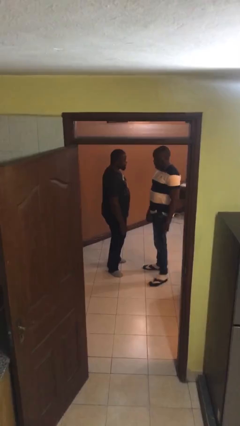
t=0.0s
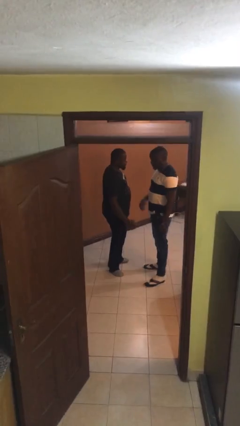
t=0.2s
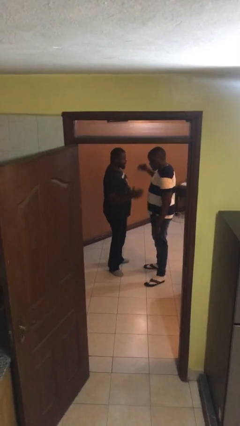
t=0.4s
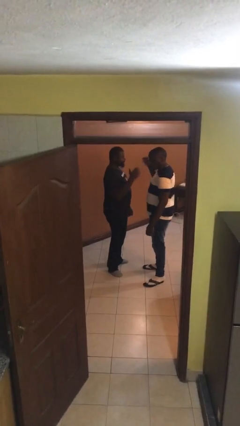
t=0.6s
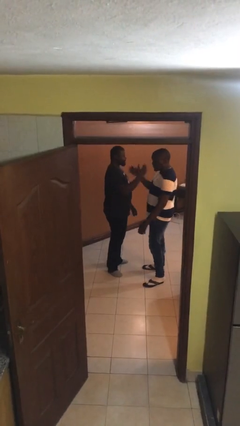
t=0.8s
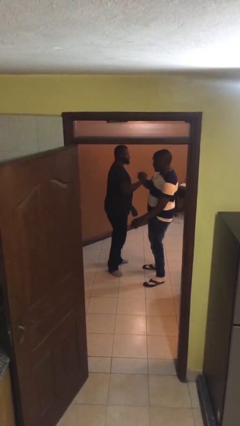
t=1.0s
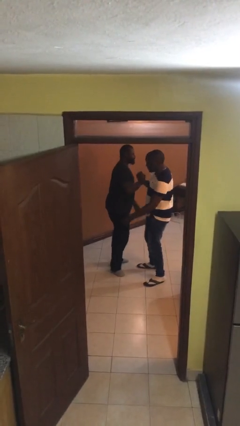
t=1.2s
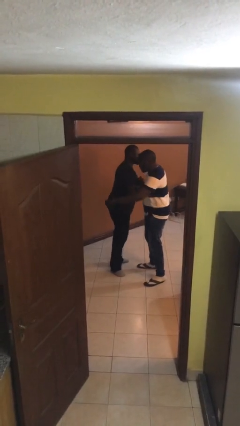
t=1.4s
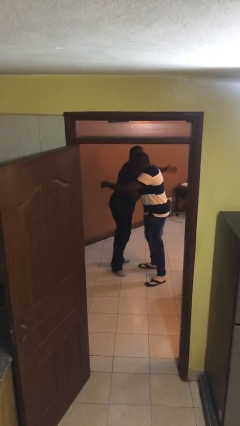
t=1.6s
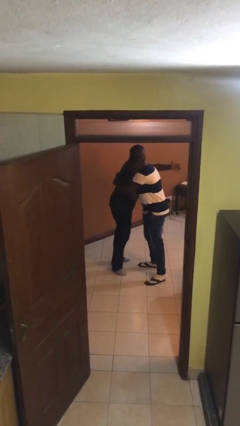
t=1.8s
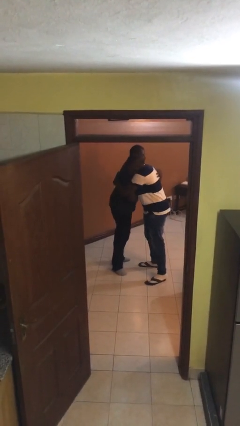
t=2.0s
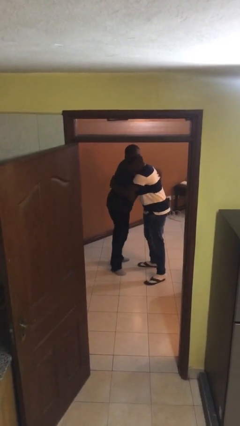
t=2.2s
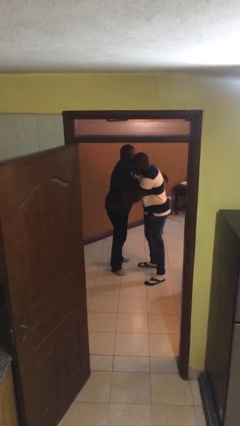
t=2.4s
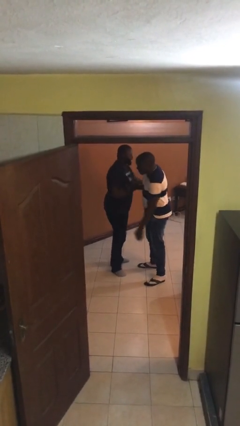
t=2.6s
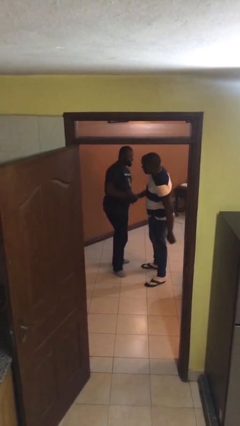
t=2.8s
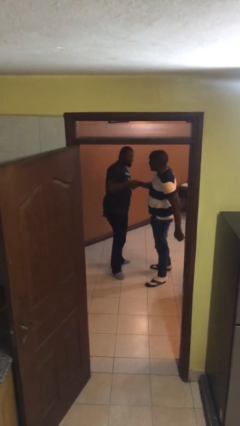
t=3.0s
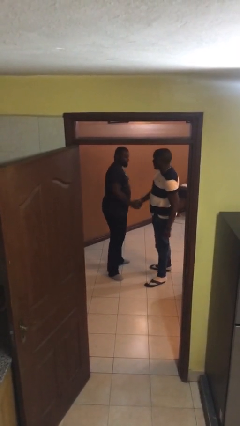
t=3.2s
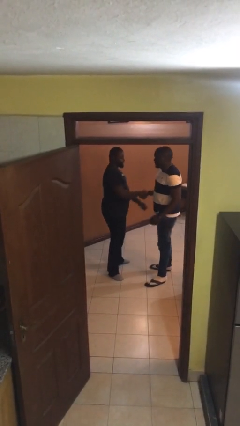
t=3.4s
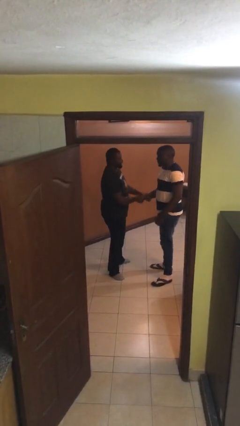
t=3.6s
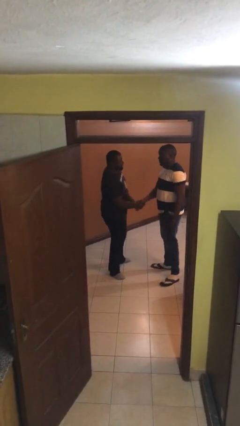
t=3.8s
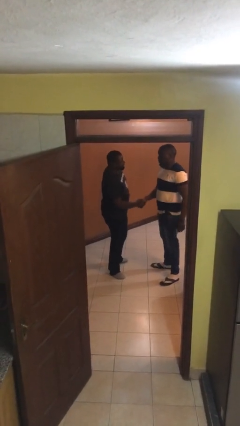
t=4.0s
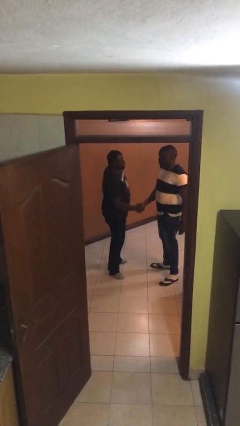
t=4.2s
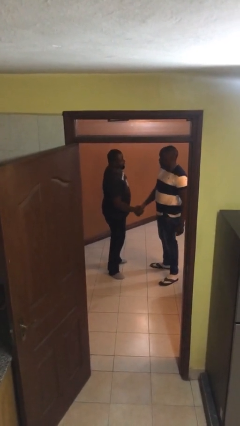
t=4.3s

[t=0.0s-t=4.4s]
person embraces person

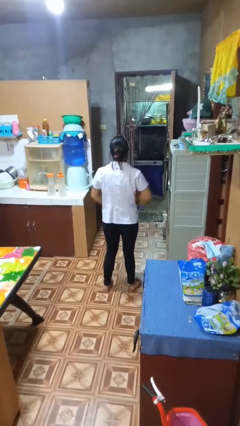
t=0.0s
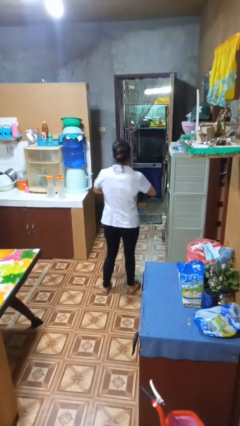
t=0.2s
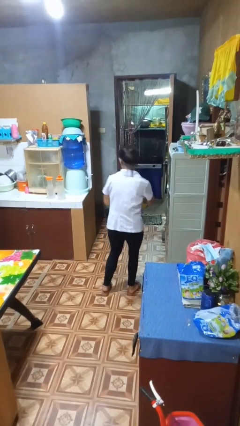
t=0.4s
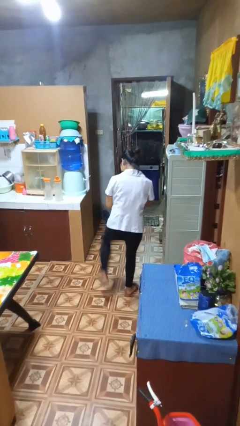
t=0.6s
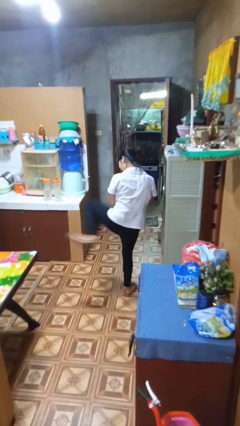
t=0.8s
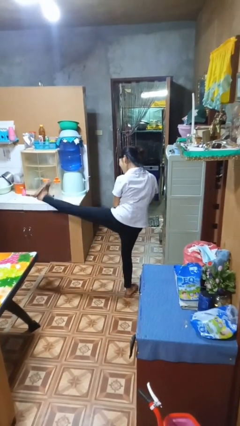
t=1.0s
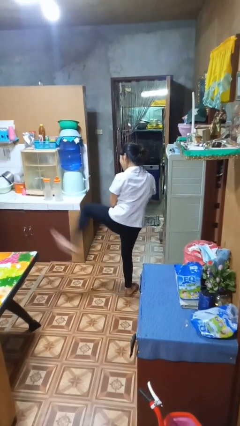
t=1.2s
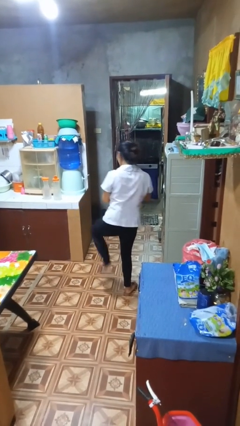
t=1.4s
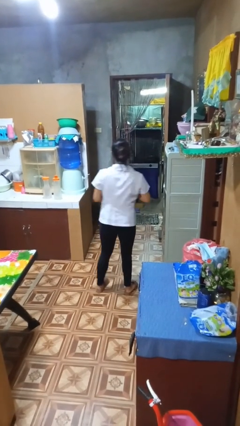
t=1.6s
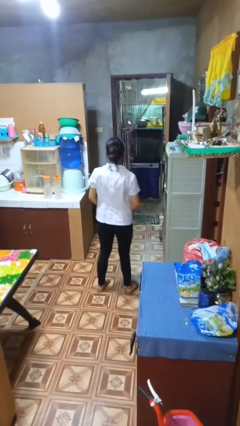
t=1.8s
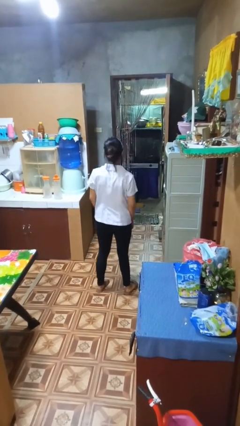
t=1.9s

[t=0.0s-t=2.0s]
person karate kicks

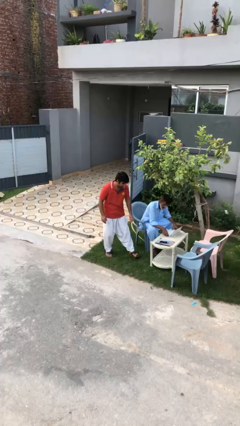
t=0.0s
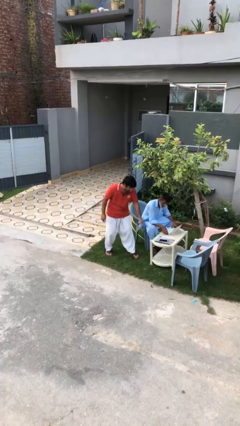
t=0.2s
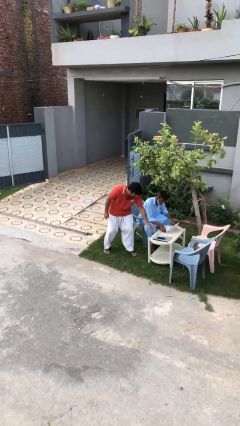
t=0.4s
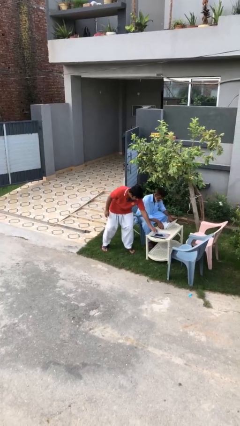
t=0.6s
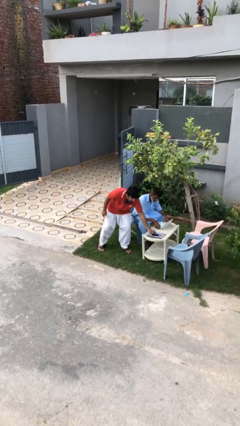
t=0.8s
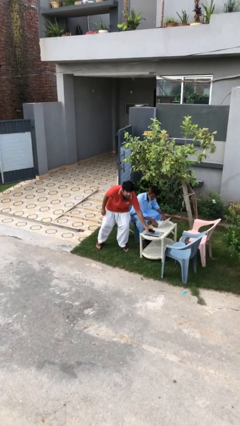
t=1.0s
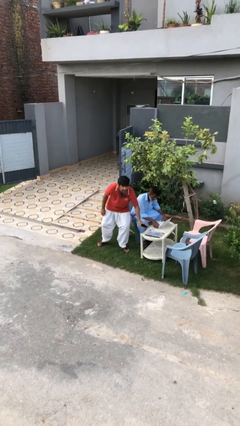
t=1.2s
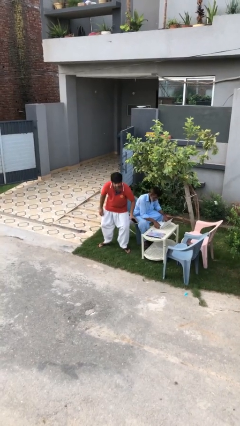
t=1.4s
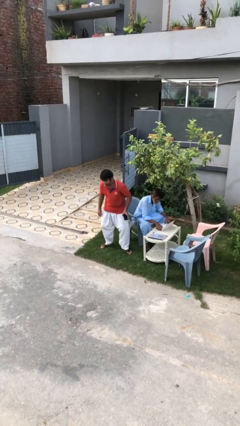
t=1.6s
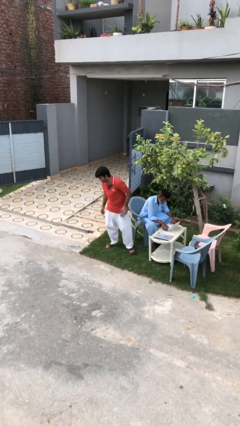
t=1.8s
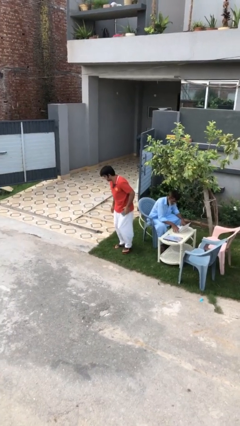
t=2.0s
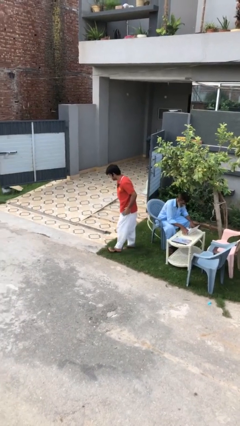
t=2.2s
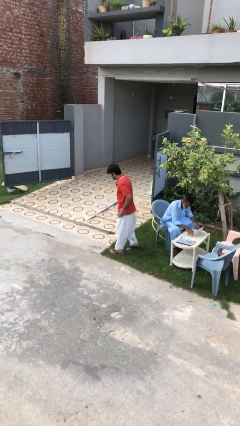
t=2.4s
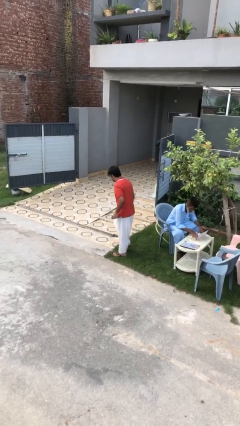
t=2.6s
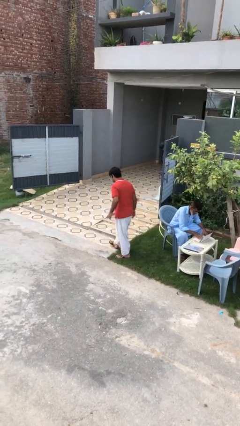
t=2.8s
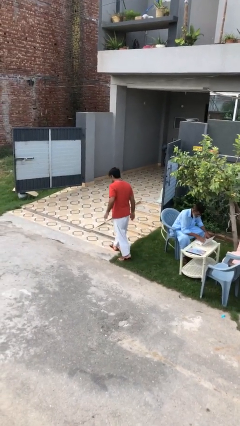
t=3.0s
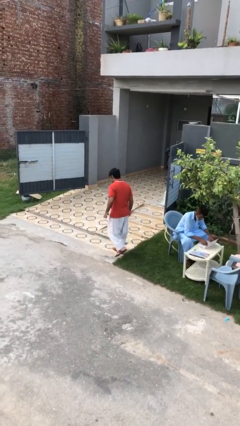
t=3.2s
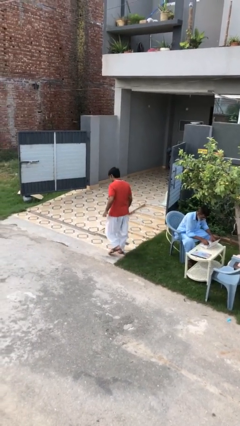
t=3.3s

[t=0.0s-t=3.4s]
person steals object from person

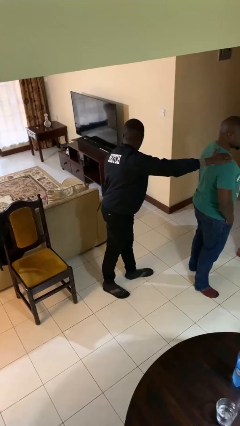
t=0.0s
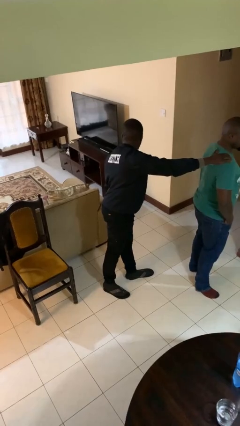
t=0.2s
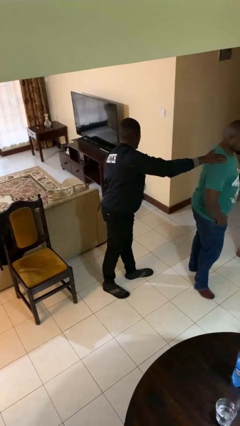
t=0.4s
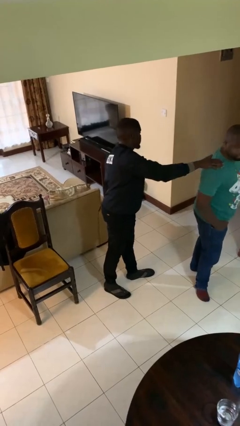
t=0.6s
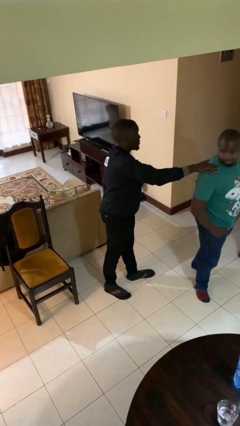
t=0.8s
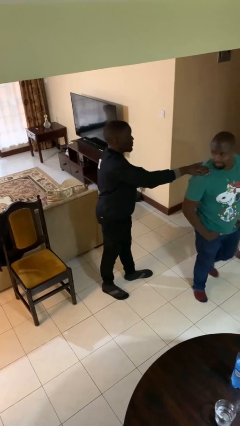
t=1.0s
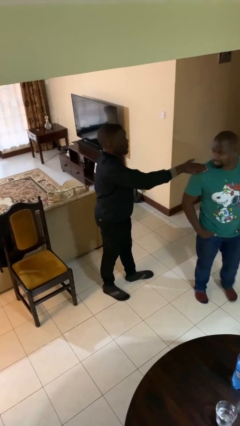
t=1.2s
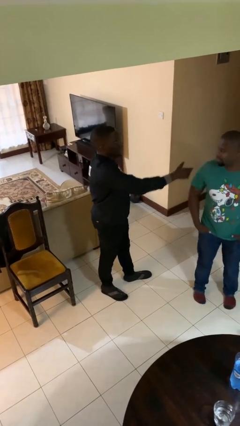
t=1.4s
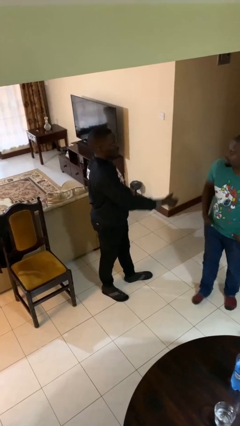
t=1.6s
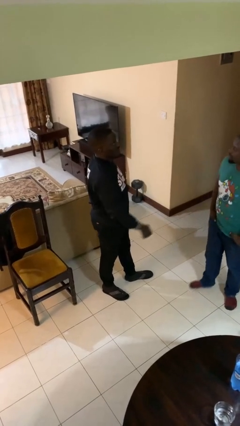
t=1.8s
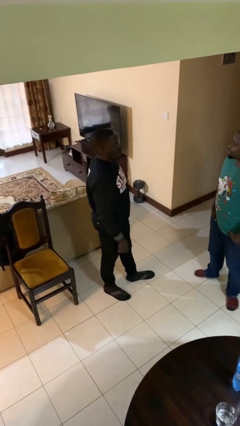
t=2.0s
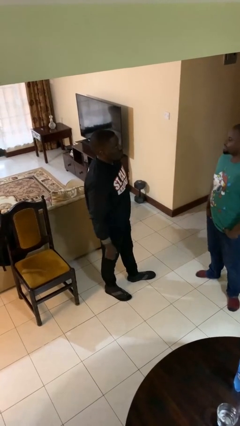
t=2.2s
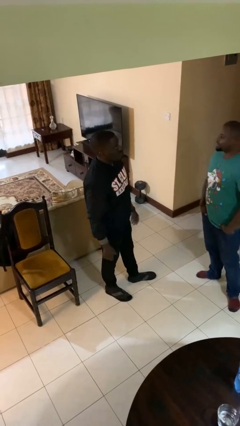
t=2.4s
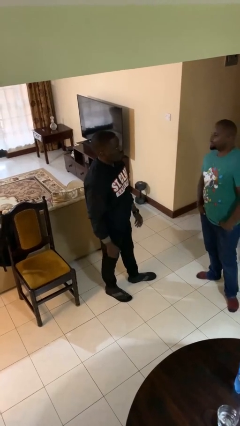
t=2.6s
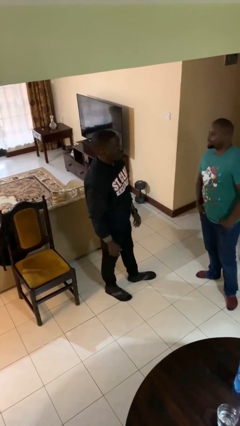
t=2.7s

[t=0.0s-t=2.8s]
person spins person around

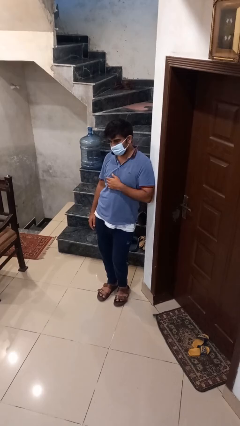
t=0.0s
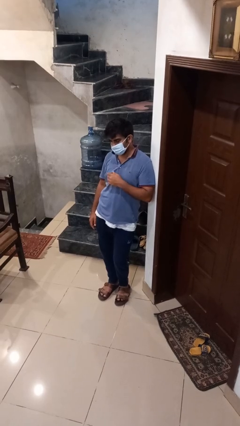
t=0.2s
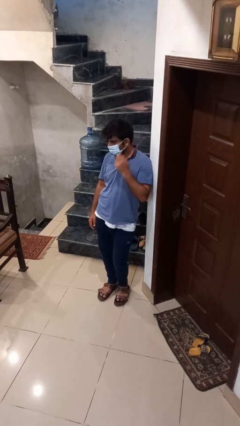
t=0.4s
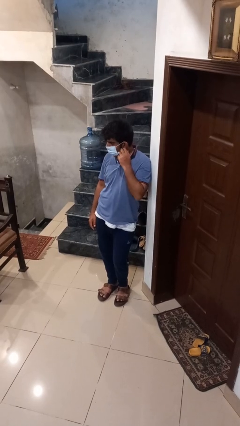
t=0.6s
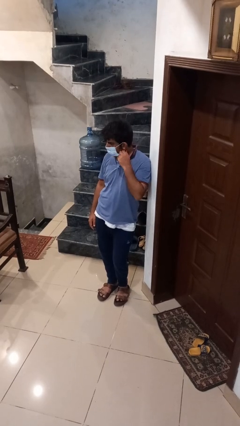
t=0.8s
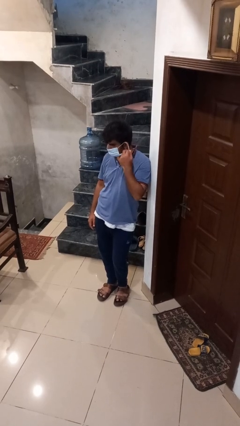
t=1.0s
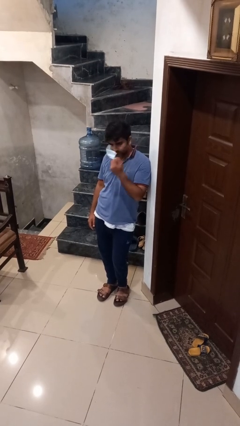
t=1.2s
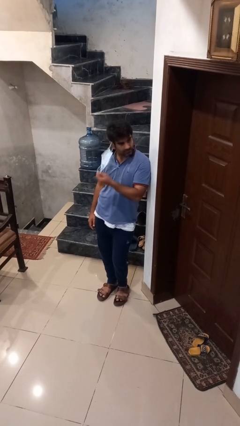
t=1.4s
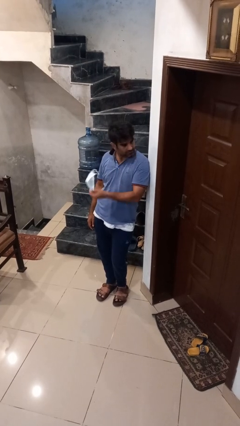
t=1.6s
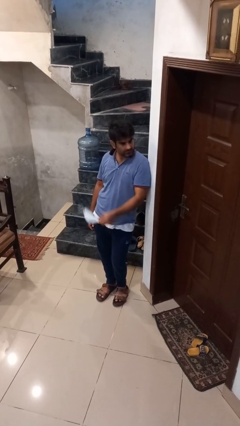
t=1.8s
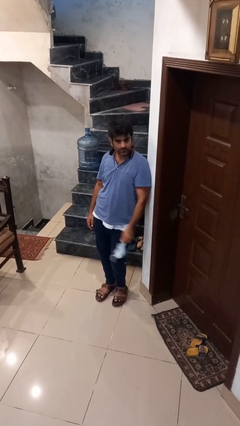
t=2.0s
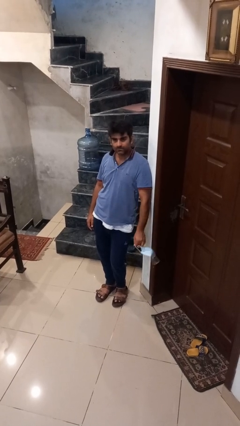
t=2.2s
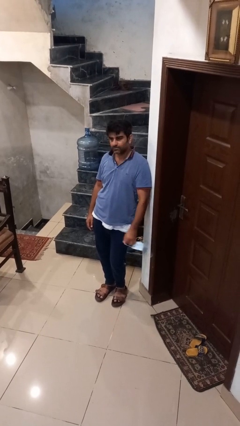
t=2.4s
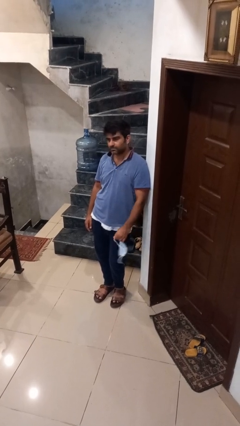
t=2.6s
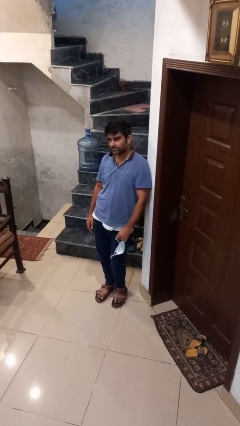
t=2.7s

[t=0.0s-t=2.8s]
person takes off facemask

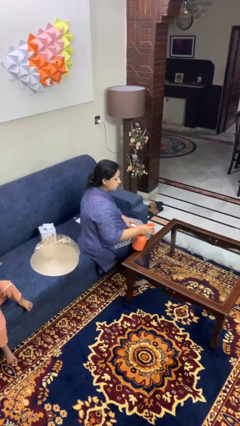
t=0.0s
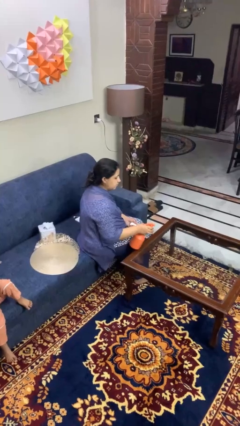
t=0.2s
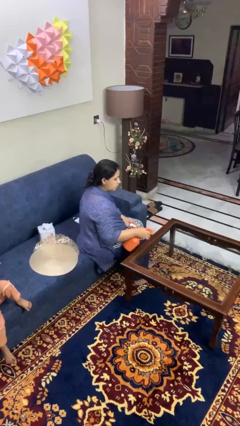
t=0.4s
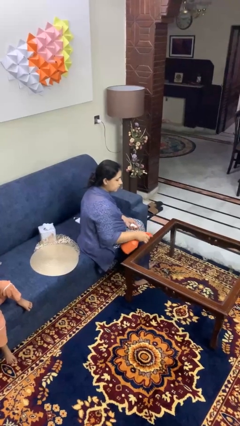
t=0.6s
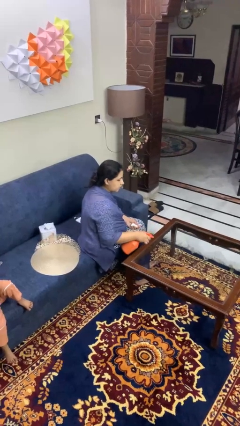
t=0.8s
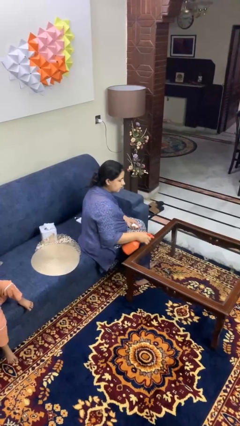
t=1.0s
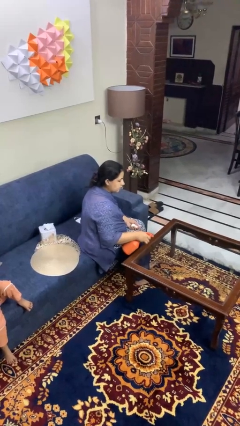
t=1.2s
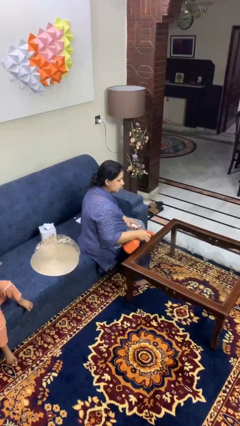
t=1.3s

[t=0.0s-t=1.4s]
person sprays from bottle

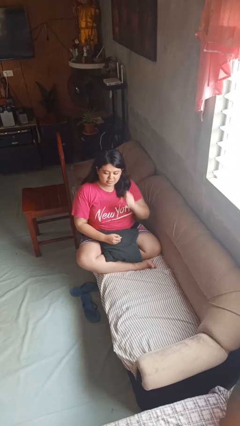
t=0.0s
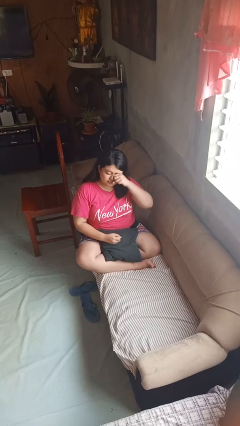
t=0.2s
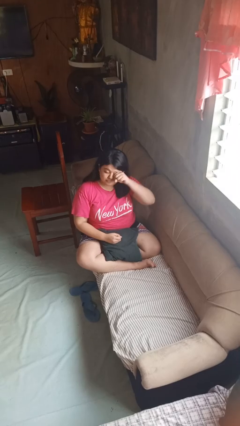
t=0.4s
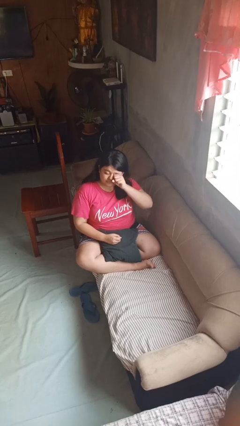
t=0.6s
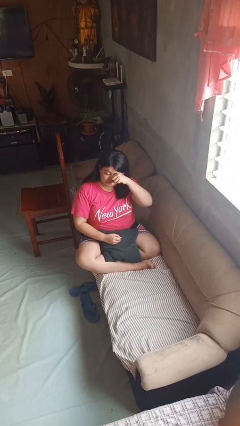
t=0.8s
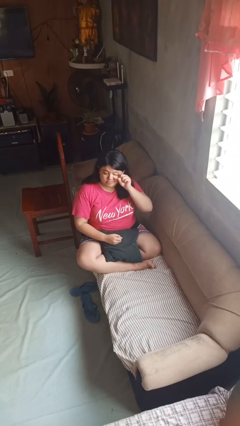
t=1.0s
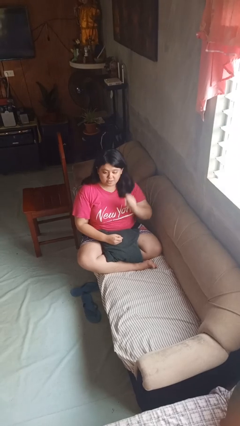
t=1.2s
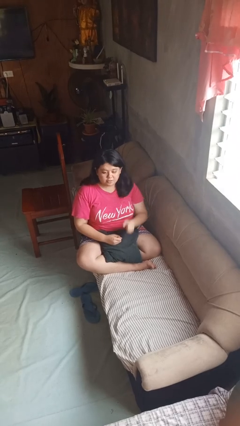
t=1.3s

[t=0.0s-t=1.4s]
person rubs eyes
